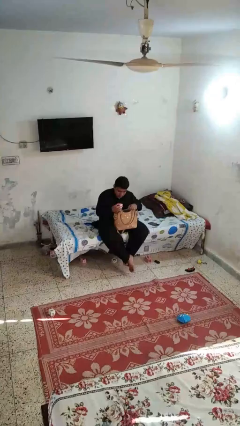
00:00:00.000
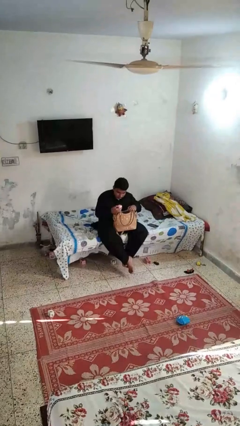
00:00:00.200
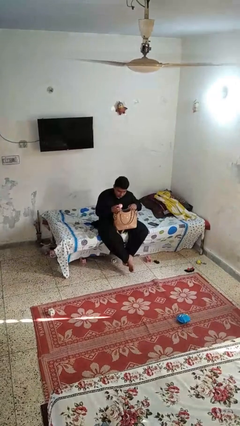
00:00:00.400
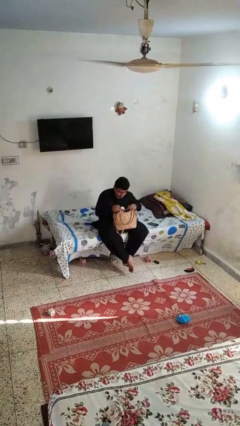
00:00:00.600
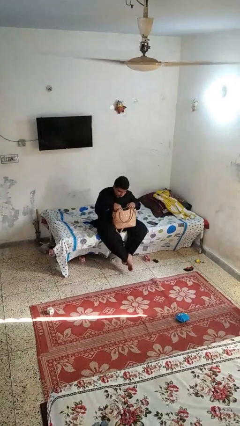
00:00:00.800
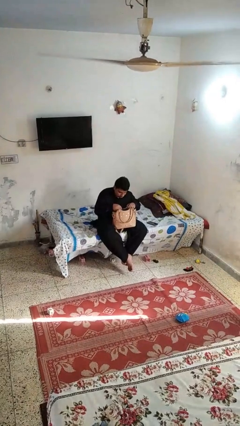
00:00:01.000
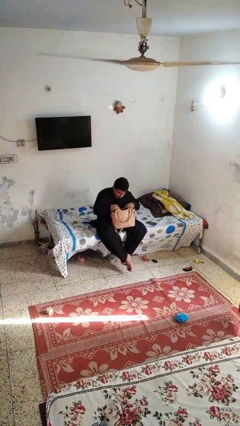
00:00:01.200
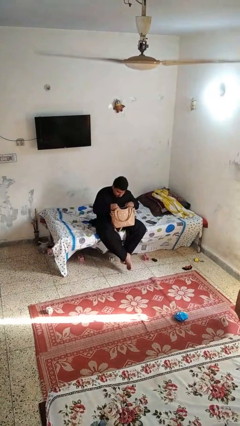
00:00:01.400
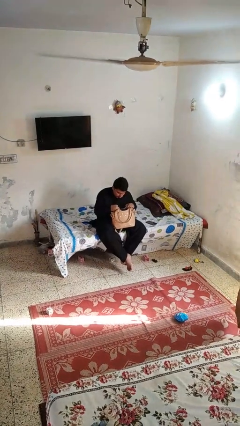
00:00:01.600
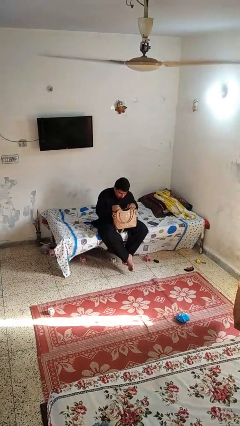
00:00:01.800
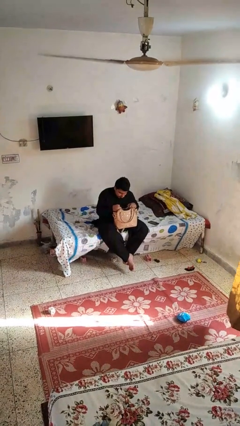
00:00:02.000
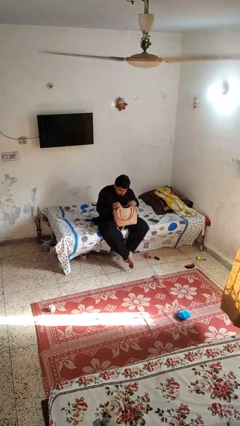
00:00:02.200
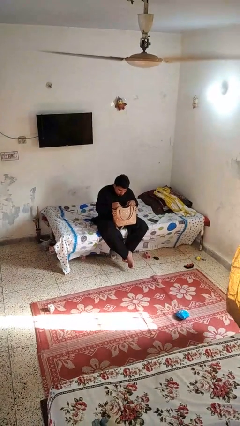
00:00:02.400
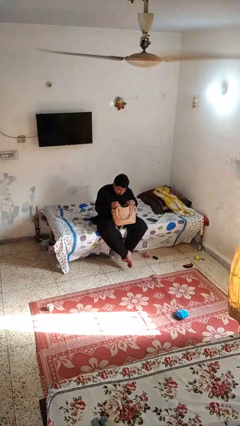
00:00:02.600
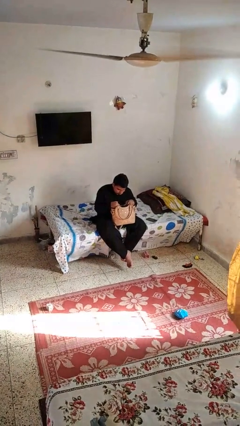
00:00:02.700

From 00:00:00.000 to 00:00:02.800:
person puts object into purse

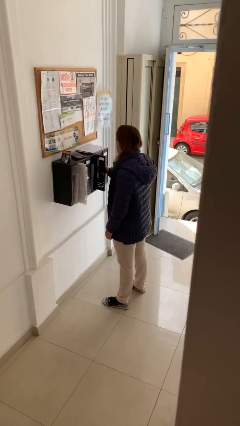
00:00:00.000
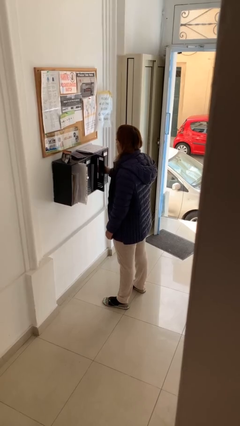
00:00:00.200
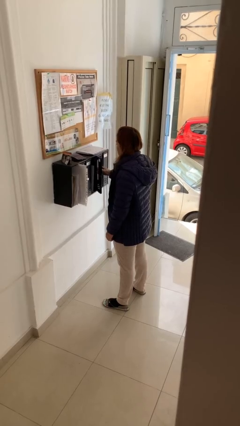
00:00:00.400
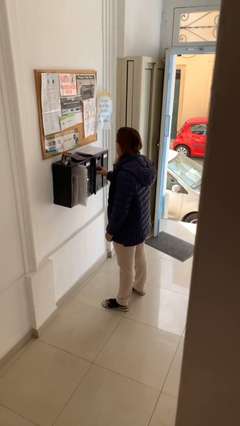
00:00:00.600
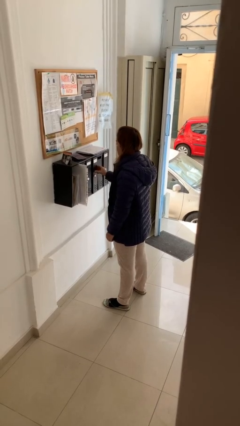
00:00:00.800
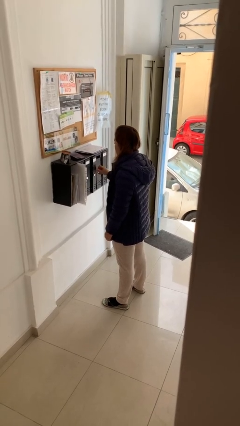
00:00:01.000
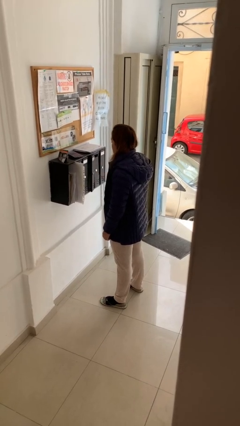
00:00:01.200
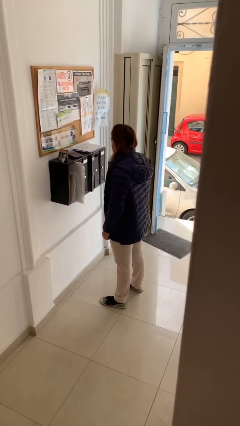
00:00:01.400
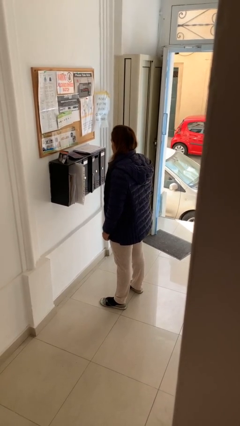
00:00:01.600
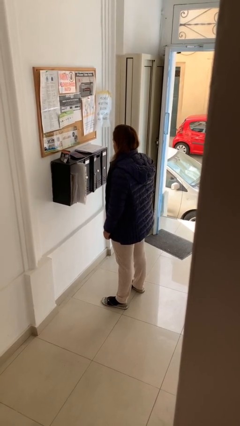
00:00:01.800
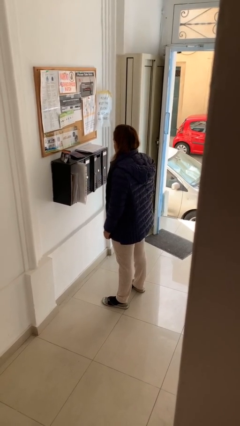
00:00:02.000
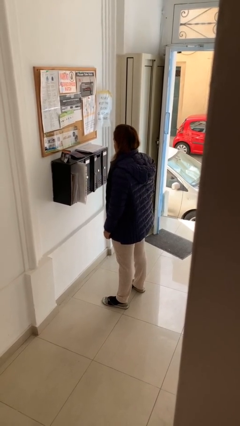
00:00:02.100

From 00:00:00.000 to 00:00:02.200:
person closes mailbox

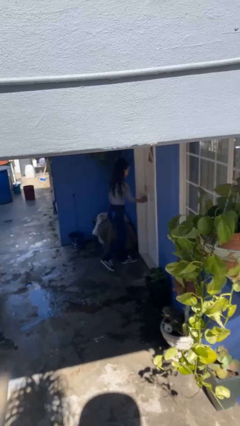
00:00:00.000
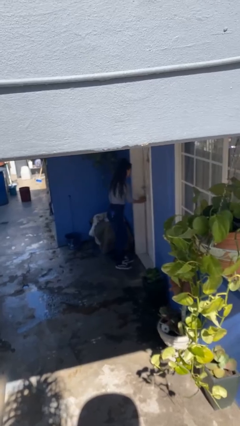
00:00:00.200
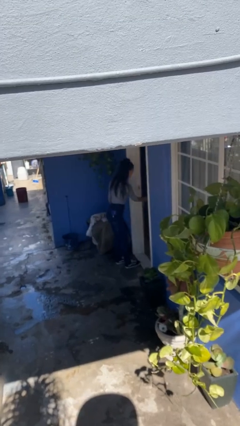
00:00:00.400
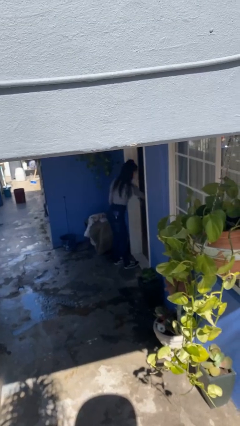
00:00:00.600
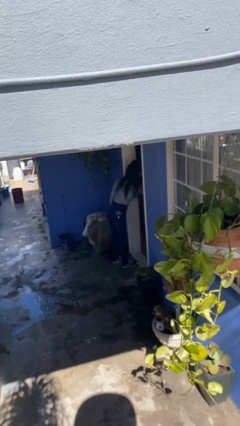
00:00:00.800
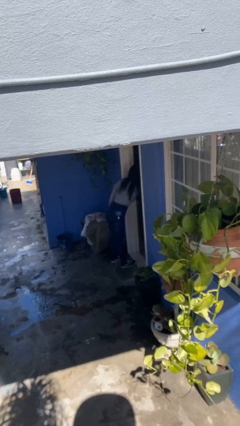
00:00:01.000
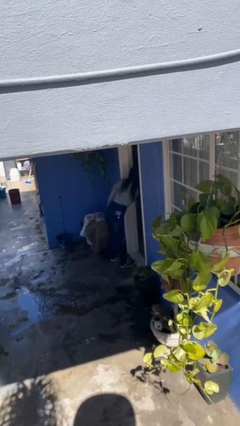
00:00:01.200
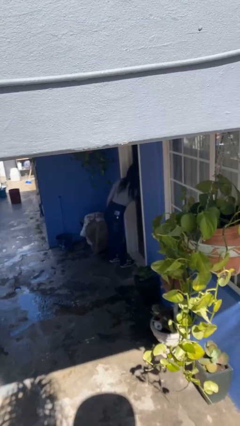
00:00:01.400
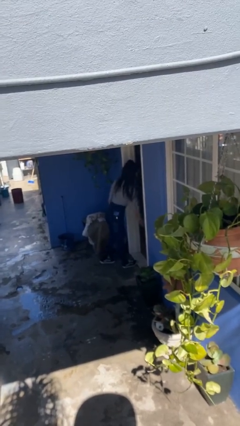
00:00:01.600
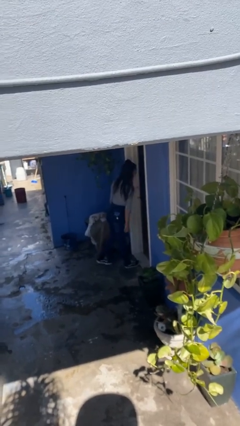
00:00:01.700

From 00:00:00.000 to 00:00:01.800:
person opens facility door

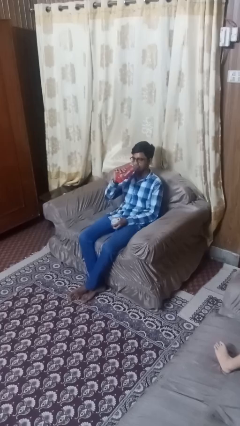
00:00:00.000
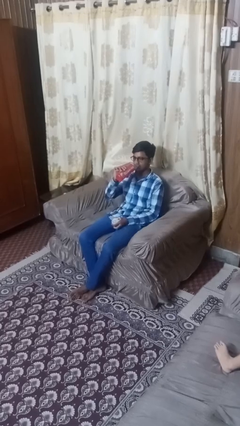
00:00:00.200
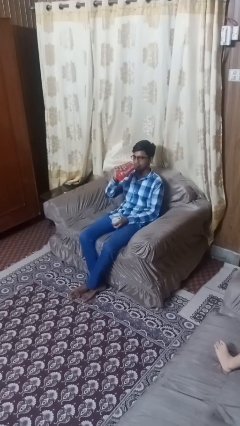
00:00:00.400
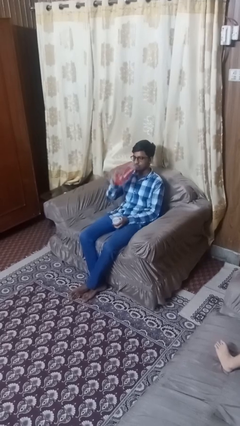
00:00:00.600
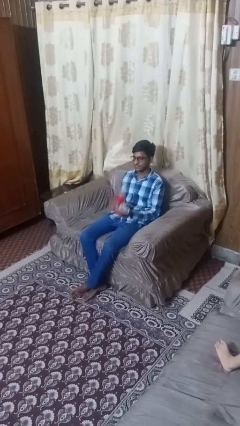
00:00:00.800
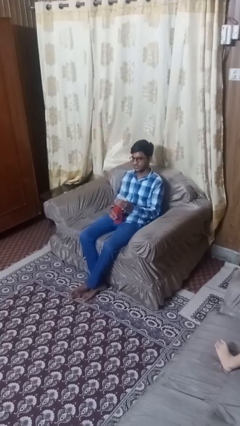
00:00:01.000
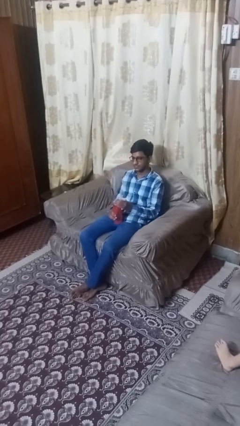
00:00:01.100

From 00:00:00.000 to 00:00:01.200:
person drinks from bottle

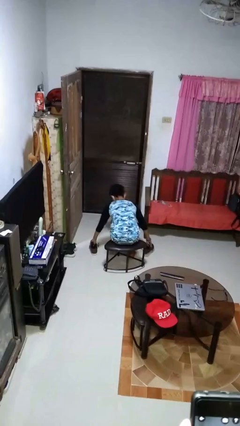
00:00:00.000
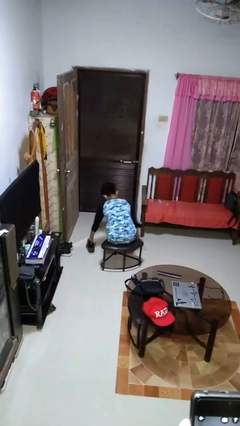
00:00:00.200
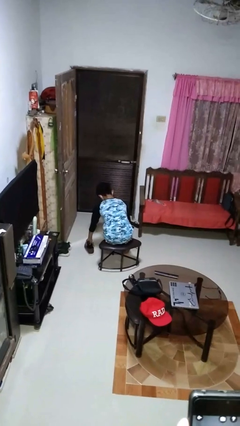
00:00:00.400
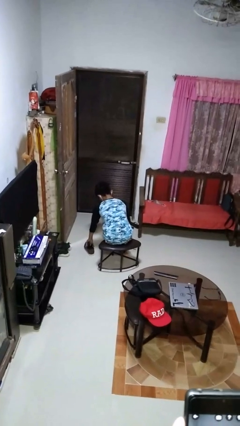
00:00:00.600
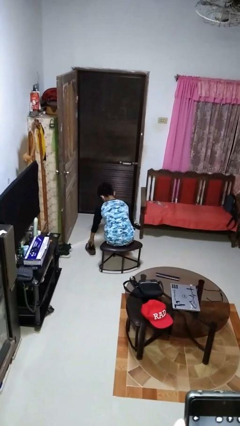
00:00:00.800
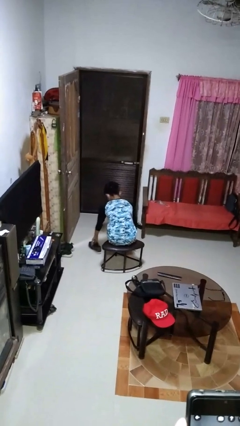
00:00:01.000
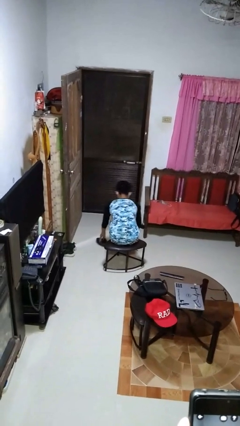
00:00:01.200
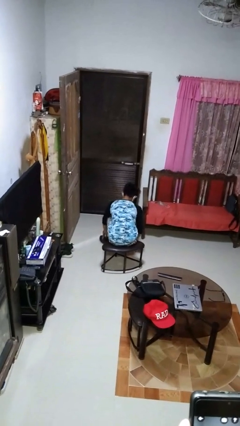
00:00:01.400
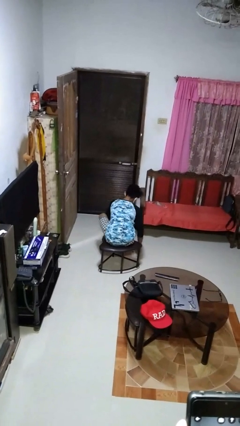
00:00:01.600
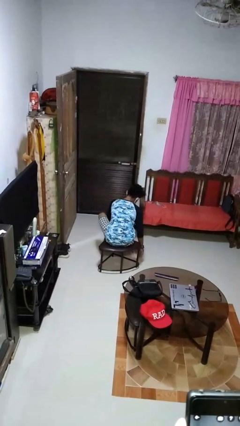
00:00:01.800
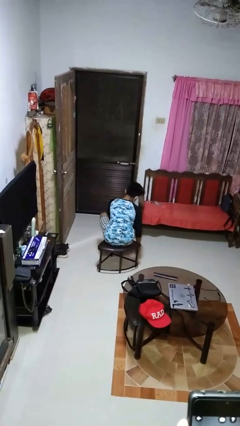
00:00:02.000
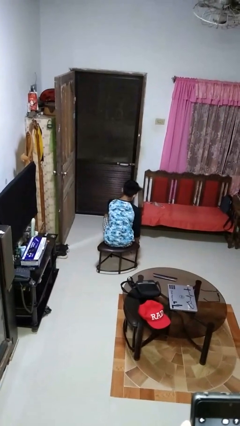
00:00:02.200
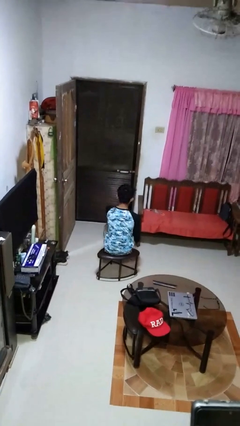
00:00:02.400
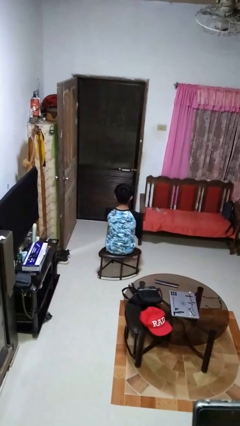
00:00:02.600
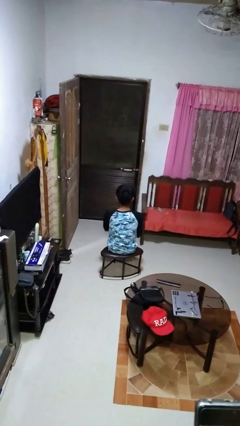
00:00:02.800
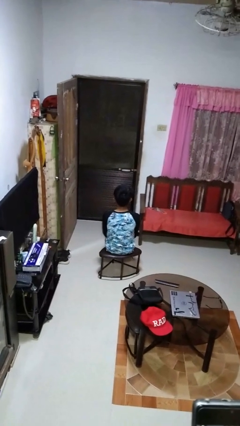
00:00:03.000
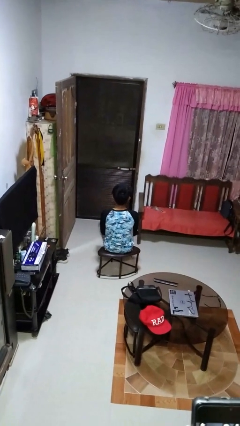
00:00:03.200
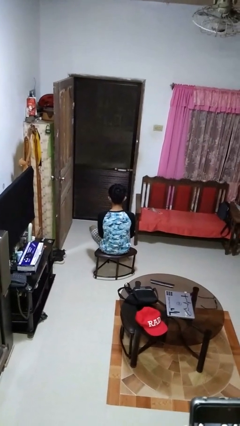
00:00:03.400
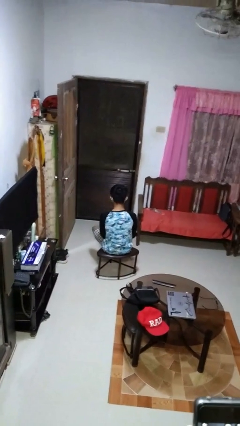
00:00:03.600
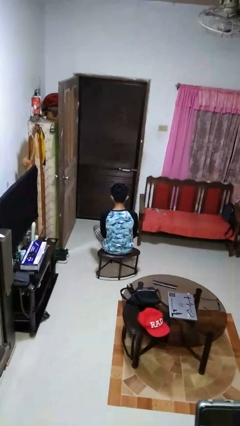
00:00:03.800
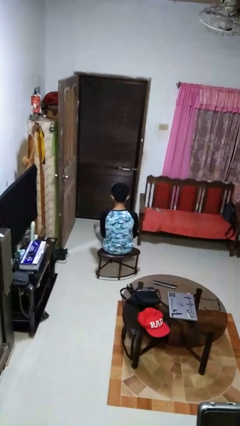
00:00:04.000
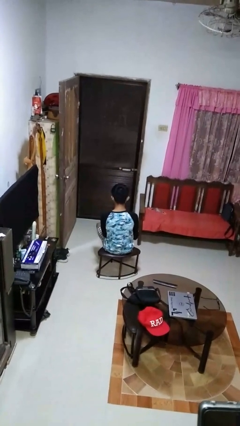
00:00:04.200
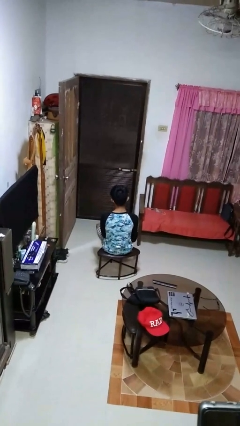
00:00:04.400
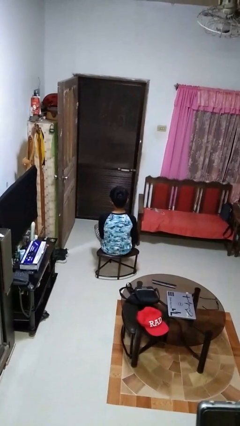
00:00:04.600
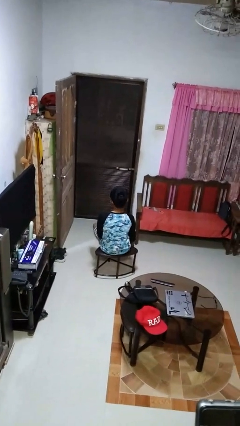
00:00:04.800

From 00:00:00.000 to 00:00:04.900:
person puts on shoes

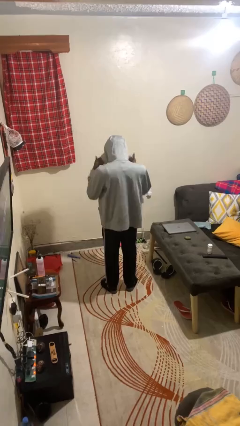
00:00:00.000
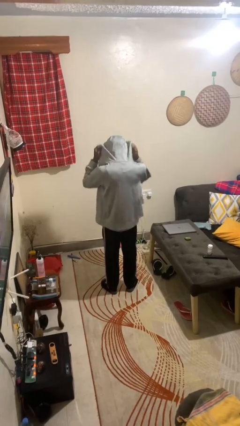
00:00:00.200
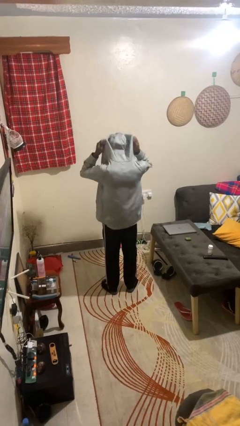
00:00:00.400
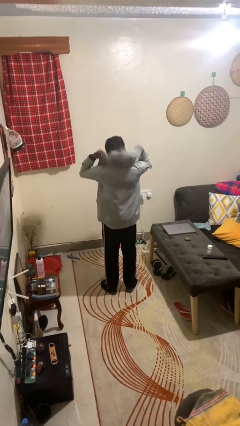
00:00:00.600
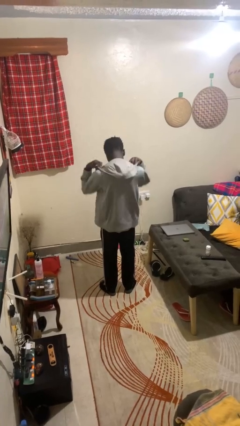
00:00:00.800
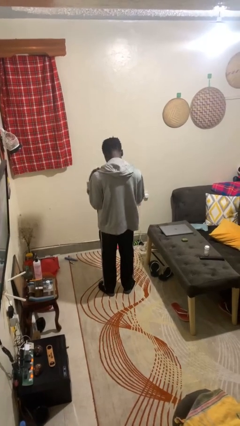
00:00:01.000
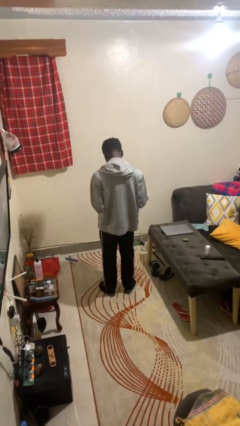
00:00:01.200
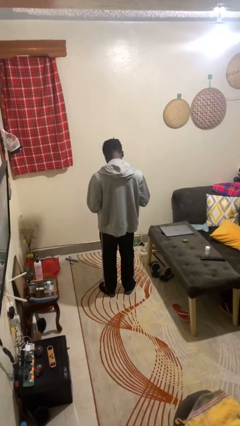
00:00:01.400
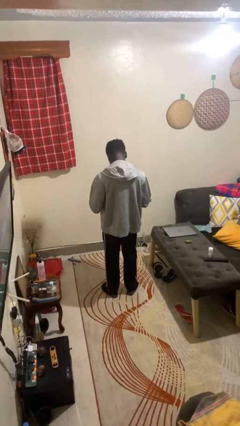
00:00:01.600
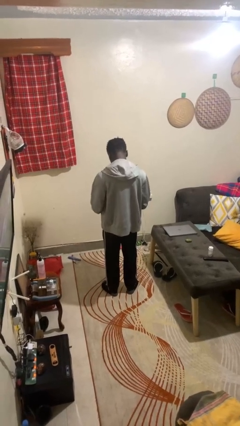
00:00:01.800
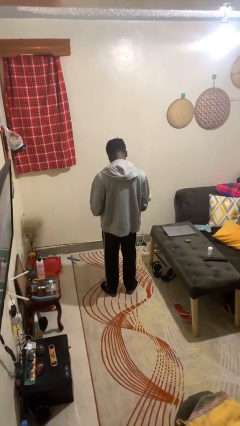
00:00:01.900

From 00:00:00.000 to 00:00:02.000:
person takes off hoodie

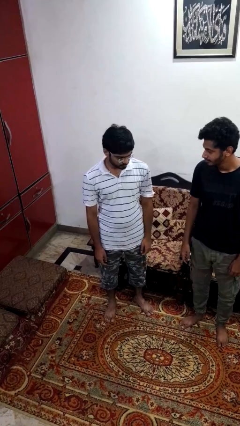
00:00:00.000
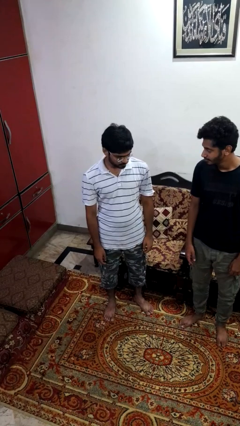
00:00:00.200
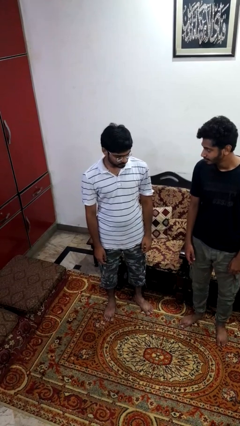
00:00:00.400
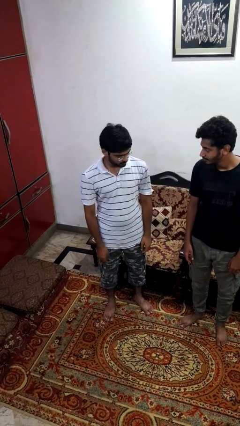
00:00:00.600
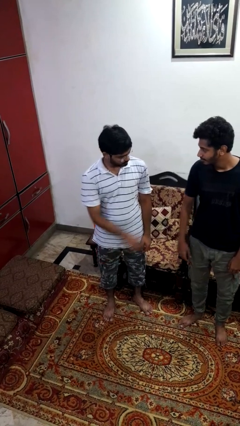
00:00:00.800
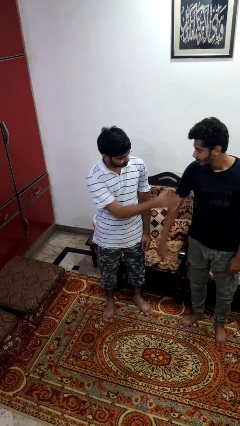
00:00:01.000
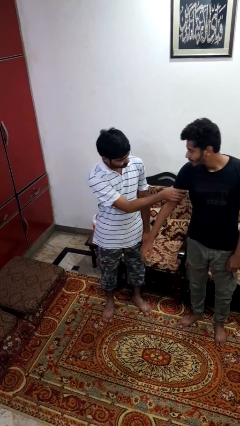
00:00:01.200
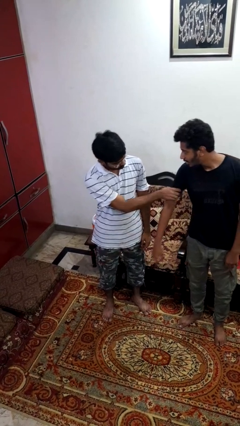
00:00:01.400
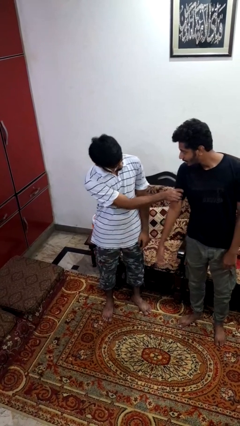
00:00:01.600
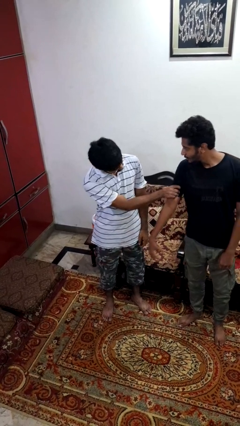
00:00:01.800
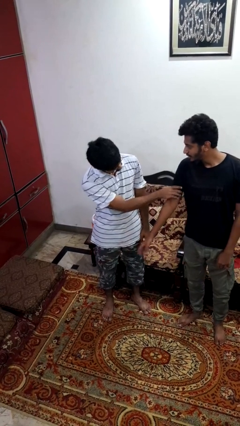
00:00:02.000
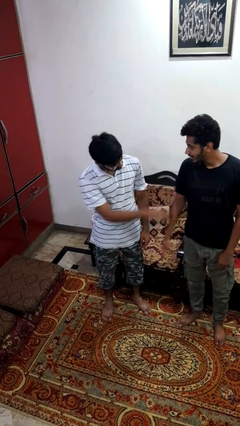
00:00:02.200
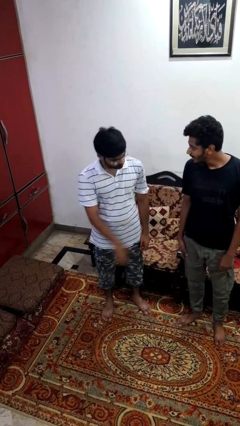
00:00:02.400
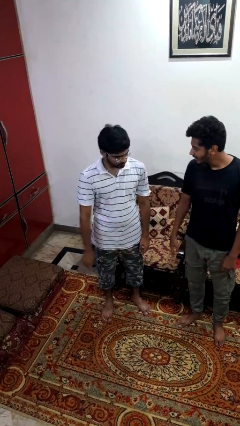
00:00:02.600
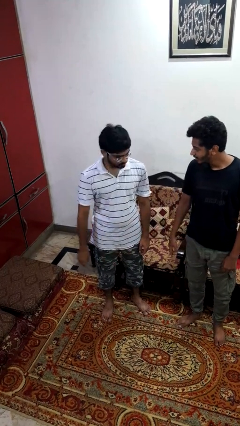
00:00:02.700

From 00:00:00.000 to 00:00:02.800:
person grabs person by bicep
